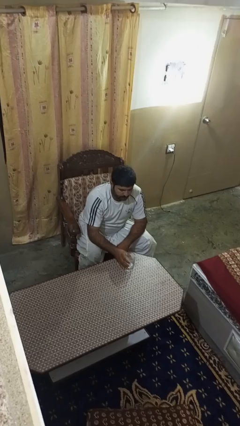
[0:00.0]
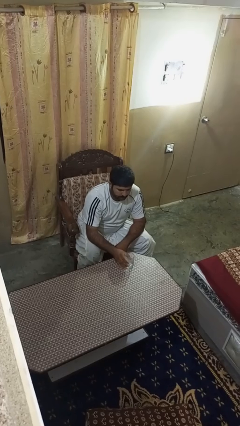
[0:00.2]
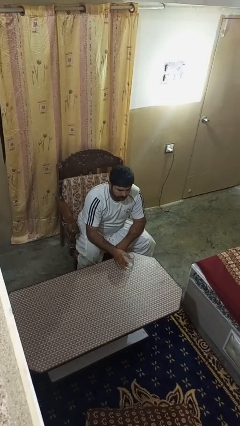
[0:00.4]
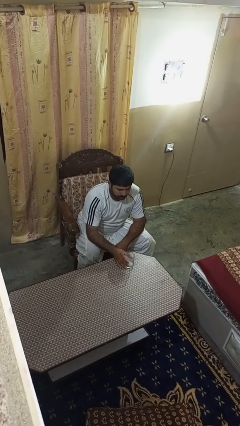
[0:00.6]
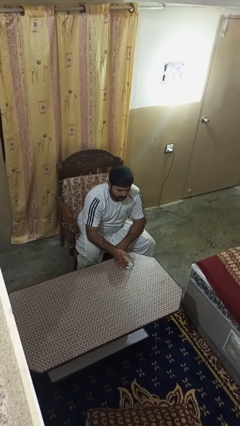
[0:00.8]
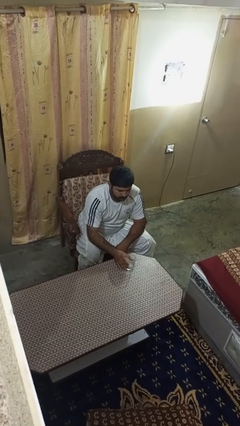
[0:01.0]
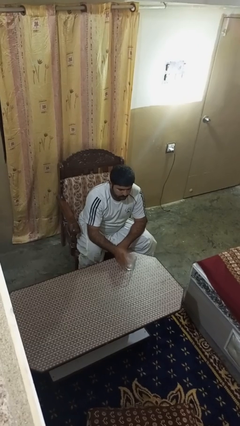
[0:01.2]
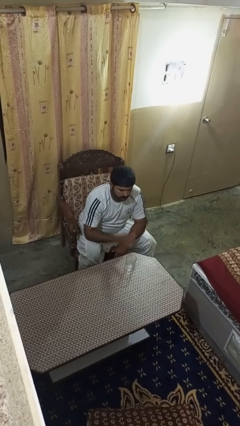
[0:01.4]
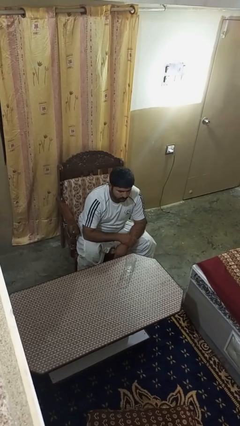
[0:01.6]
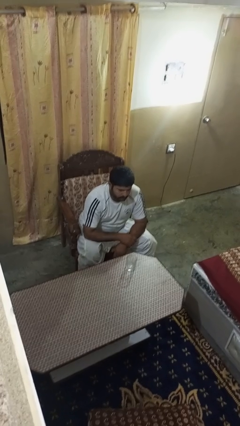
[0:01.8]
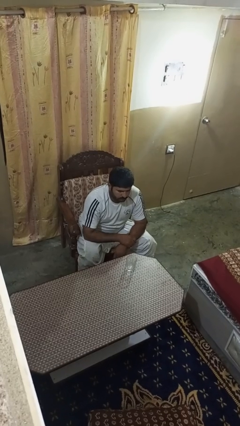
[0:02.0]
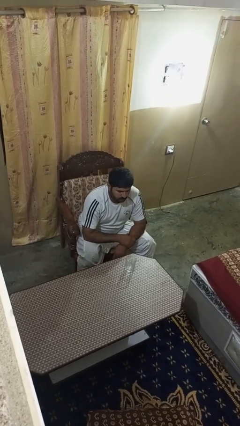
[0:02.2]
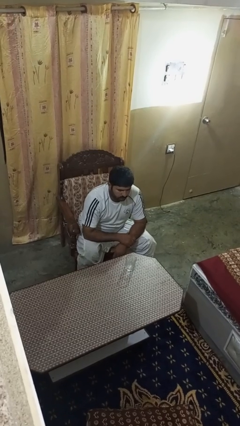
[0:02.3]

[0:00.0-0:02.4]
person puts down object on table

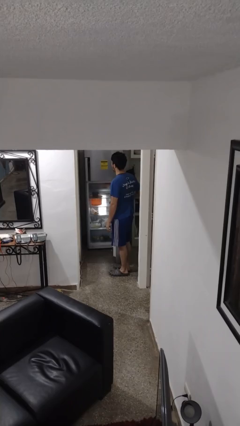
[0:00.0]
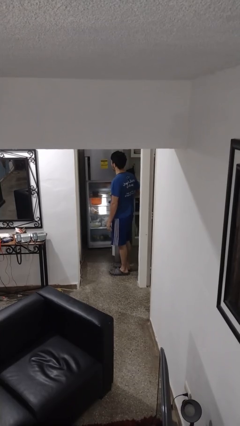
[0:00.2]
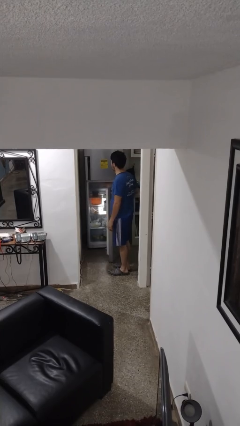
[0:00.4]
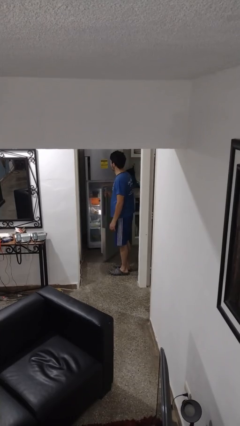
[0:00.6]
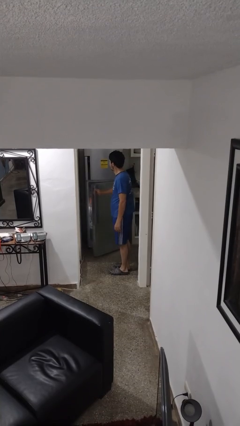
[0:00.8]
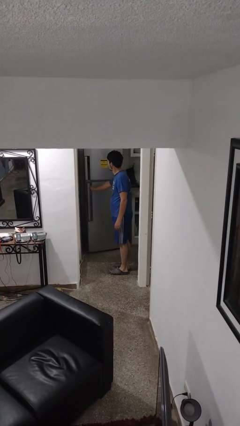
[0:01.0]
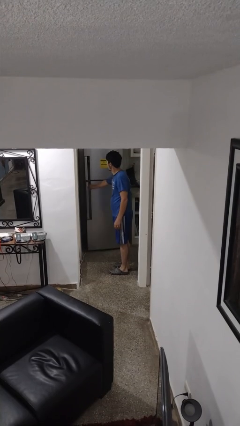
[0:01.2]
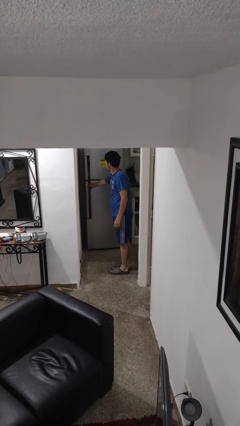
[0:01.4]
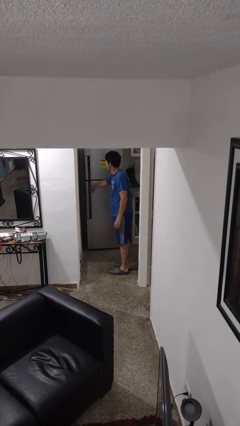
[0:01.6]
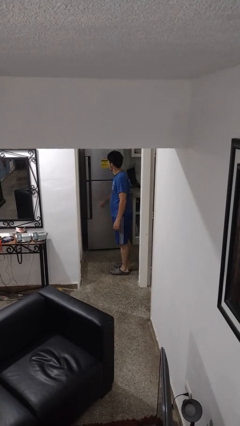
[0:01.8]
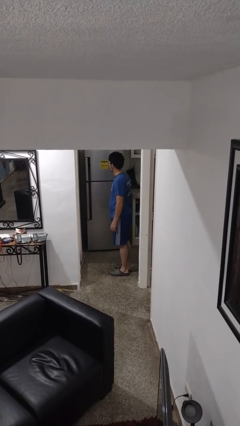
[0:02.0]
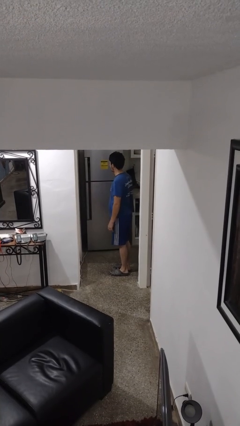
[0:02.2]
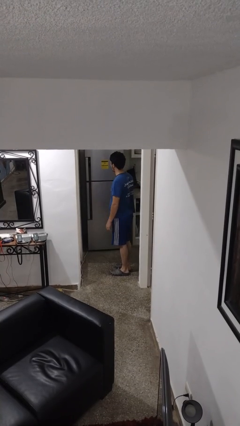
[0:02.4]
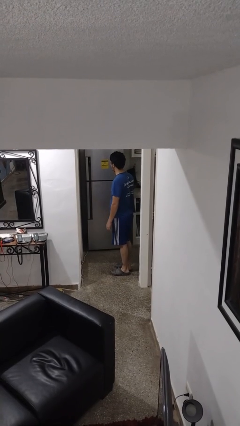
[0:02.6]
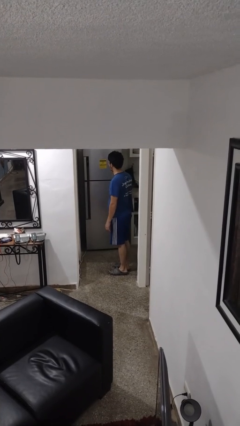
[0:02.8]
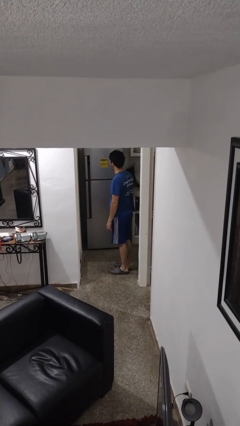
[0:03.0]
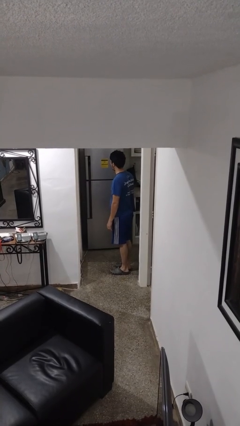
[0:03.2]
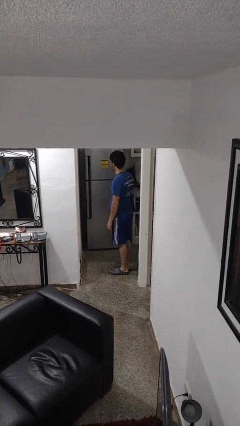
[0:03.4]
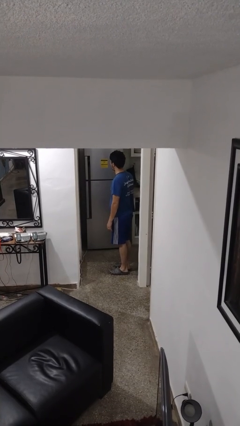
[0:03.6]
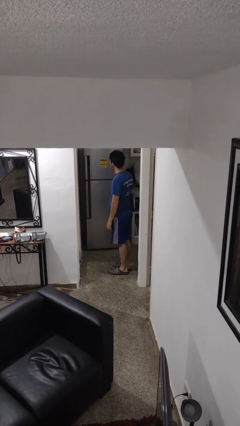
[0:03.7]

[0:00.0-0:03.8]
person closes refrigerator

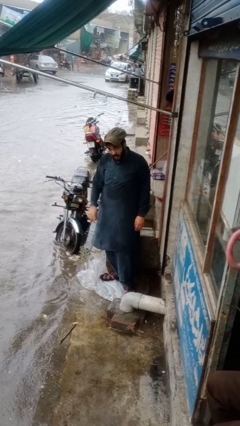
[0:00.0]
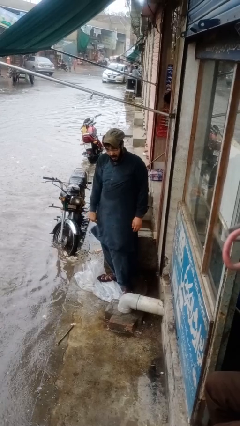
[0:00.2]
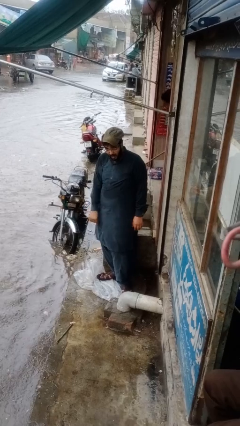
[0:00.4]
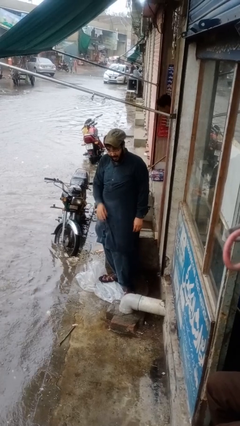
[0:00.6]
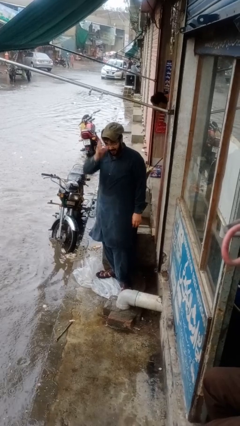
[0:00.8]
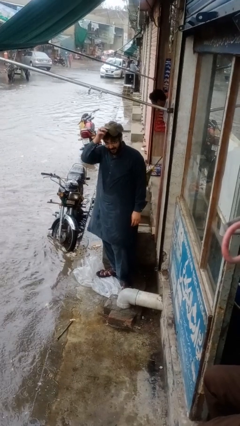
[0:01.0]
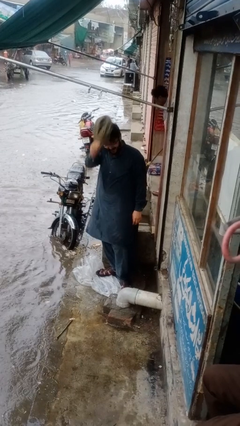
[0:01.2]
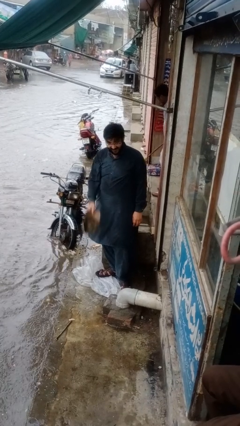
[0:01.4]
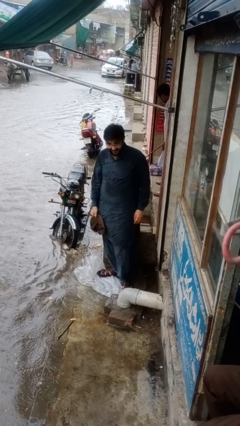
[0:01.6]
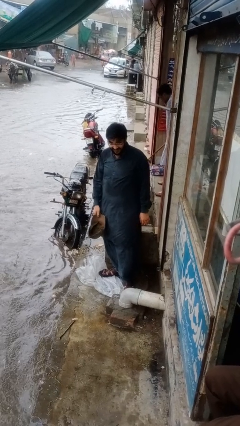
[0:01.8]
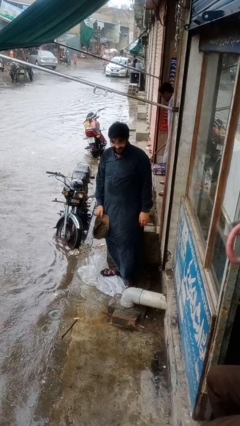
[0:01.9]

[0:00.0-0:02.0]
person takes off hat

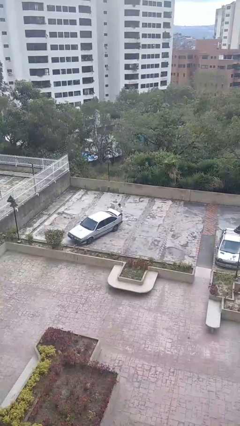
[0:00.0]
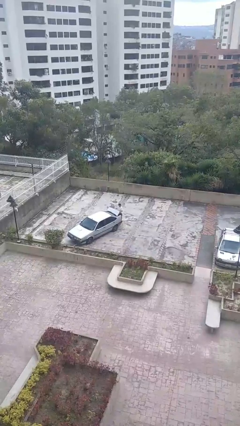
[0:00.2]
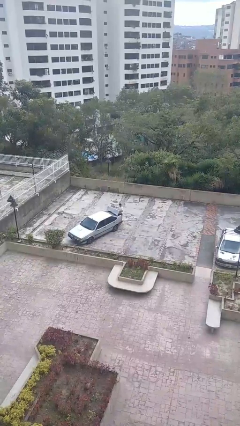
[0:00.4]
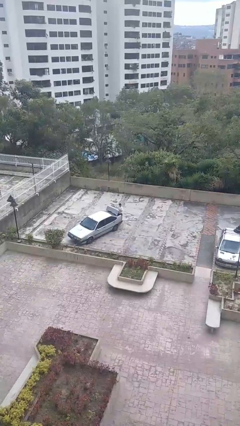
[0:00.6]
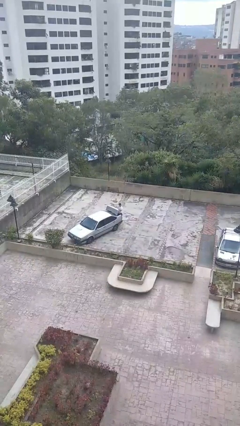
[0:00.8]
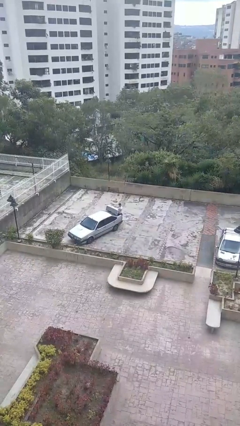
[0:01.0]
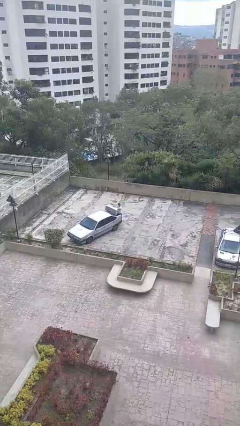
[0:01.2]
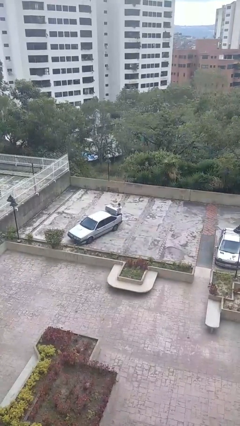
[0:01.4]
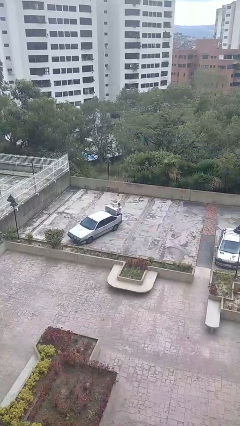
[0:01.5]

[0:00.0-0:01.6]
person opens car trunk

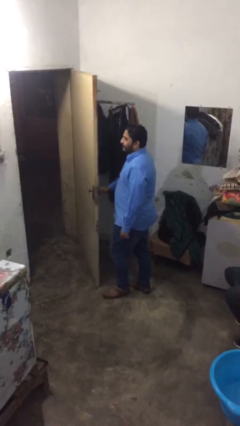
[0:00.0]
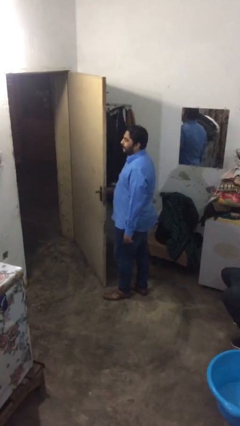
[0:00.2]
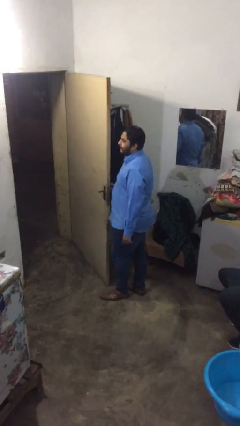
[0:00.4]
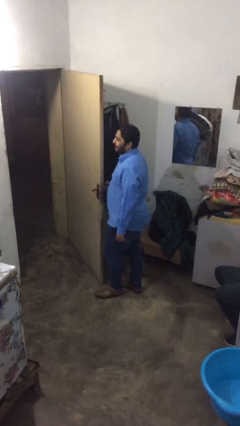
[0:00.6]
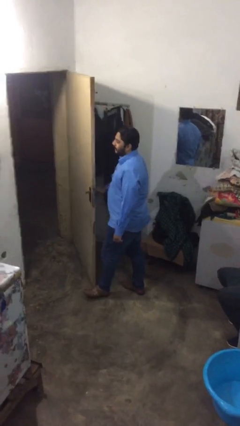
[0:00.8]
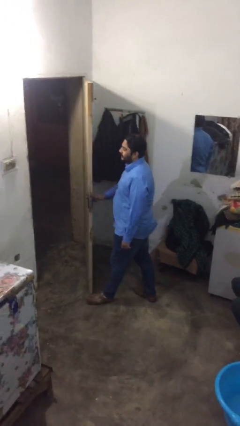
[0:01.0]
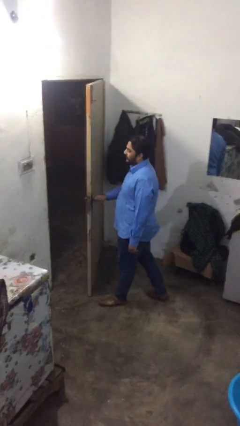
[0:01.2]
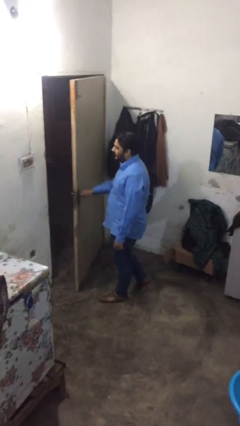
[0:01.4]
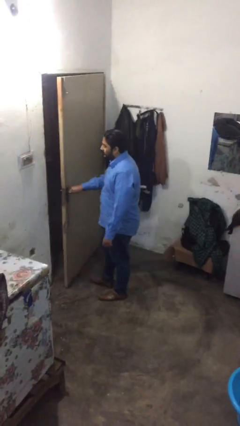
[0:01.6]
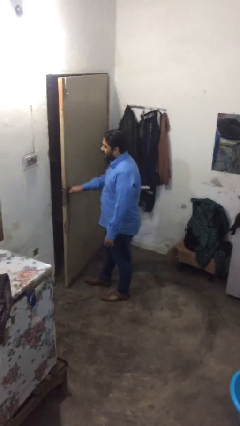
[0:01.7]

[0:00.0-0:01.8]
person closes facility door

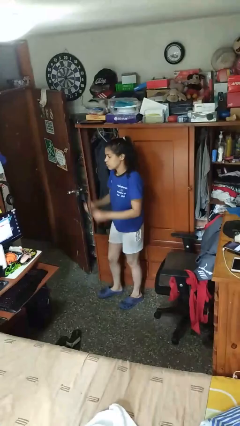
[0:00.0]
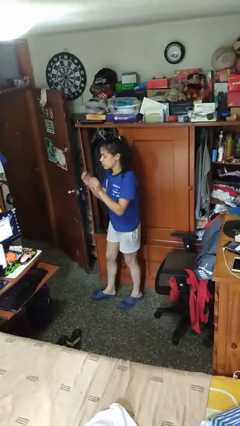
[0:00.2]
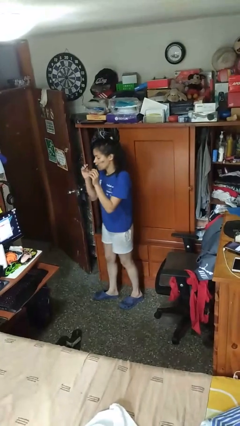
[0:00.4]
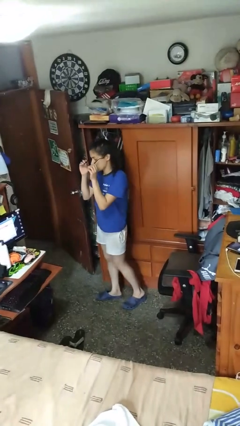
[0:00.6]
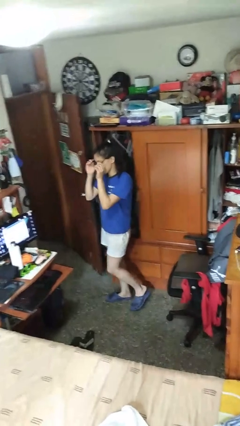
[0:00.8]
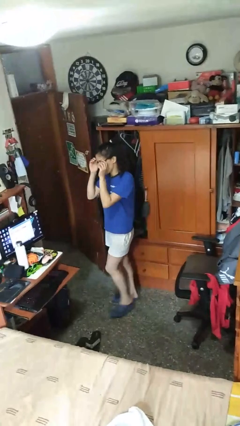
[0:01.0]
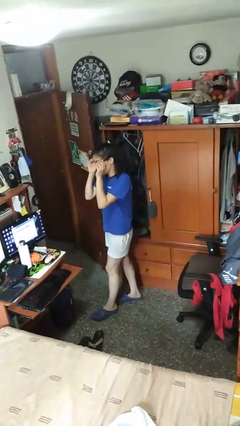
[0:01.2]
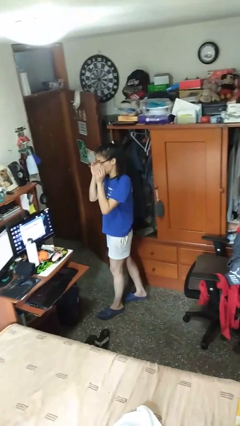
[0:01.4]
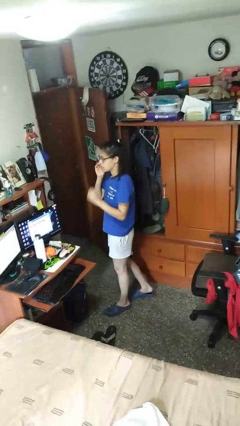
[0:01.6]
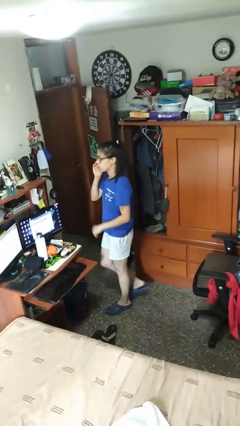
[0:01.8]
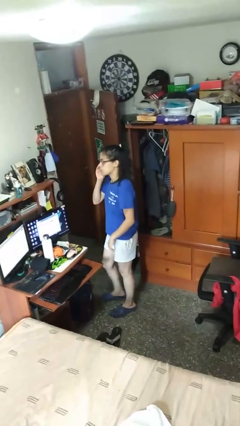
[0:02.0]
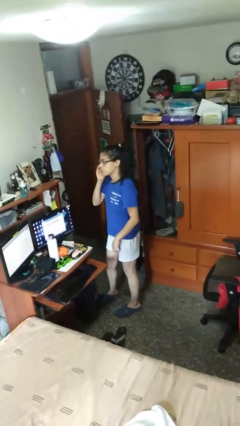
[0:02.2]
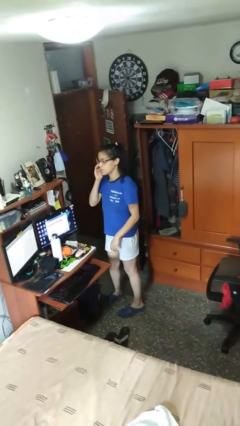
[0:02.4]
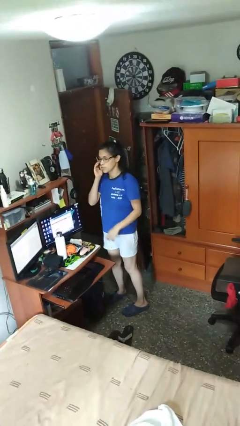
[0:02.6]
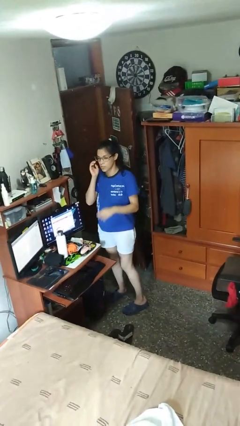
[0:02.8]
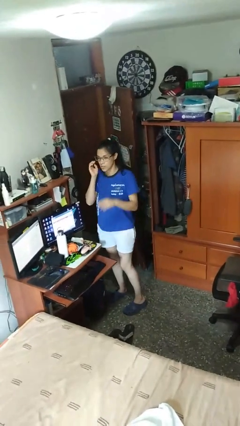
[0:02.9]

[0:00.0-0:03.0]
person puts on glasses

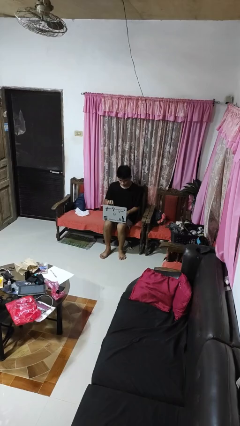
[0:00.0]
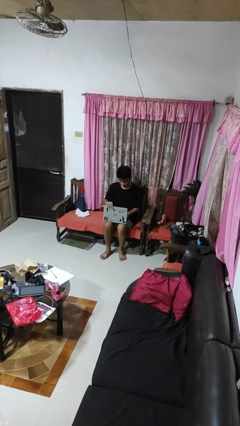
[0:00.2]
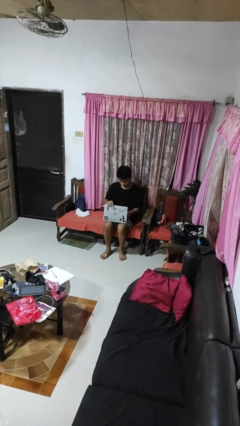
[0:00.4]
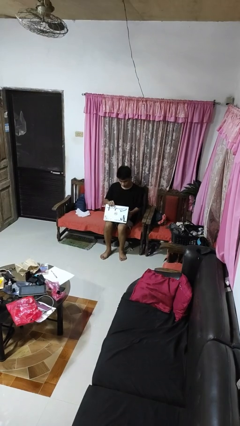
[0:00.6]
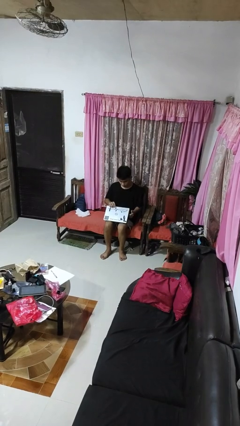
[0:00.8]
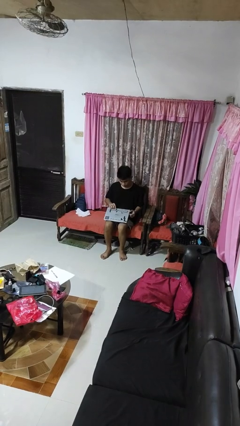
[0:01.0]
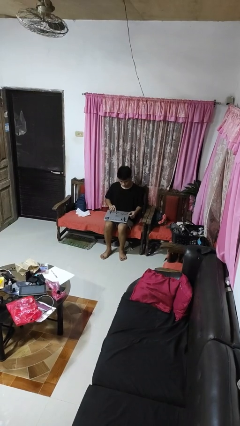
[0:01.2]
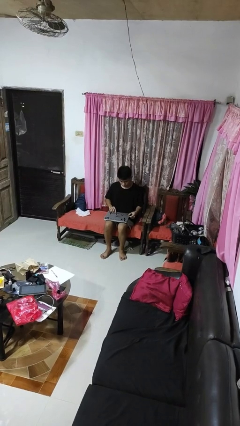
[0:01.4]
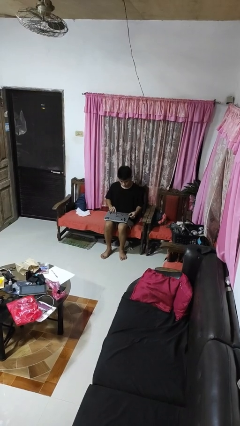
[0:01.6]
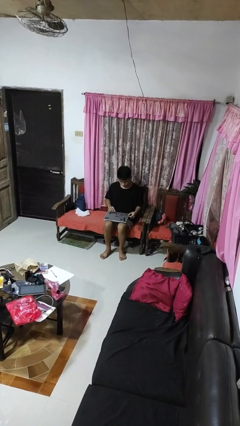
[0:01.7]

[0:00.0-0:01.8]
person closes laptop

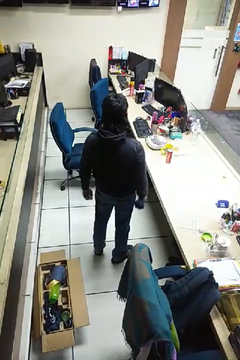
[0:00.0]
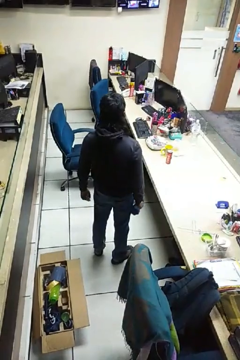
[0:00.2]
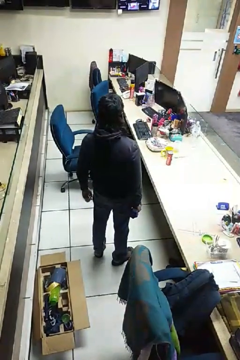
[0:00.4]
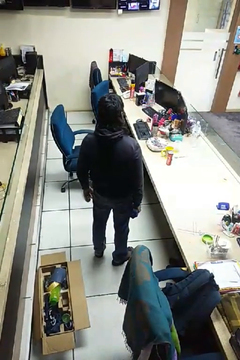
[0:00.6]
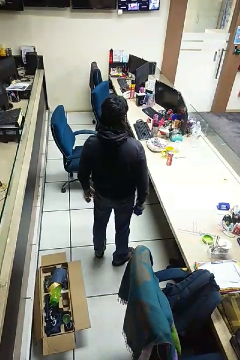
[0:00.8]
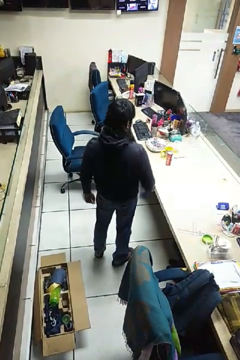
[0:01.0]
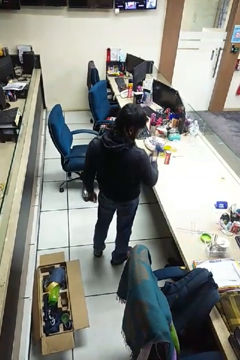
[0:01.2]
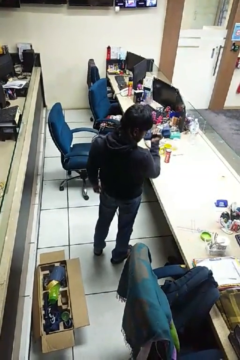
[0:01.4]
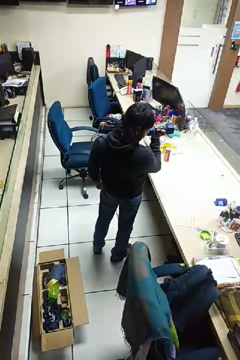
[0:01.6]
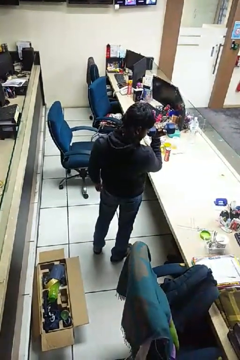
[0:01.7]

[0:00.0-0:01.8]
person lifts dumbbells
